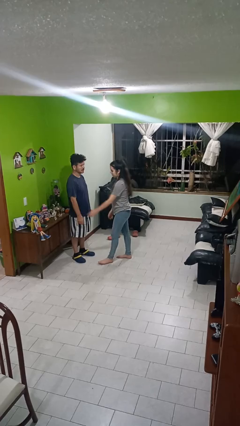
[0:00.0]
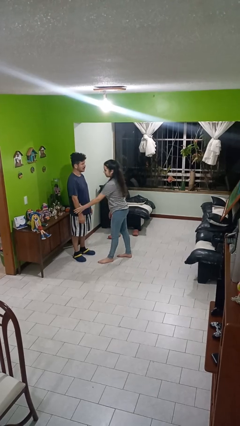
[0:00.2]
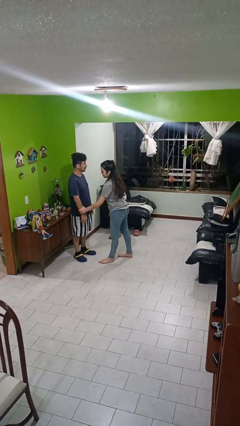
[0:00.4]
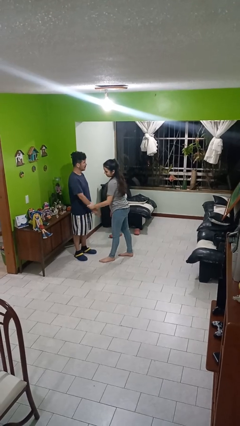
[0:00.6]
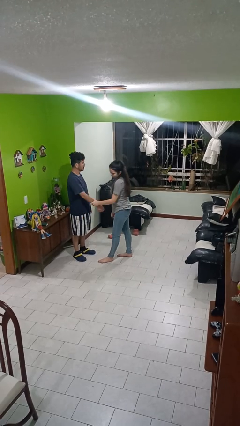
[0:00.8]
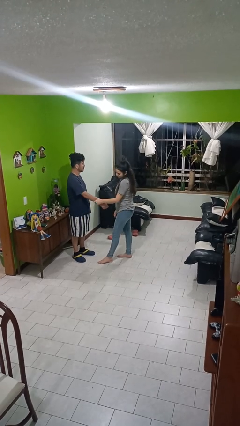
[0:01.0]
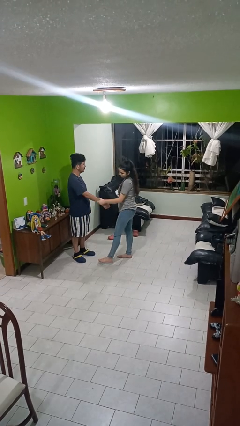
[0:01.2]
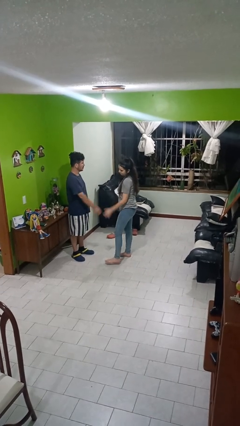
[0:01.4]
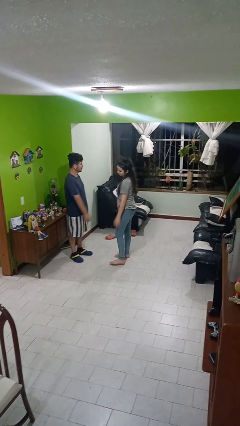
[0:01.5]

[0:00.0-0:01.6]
person grabs person by forearm

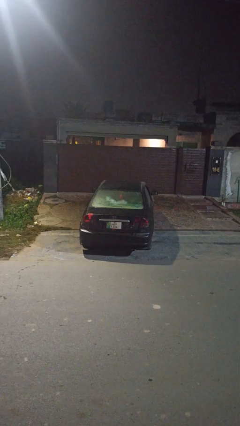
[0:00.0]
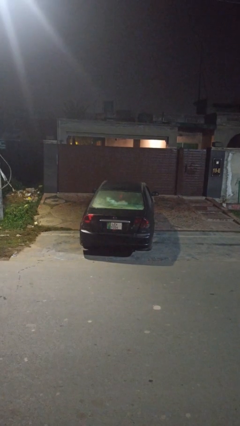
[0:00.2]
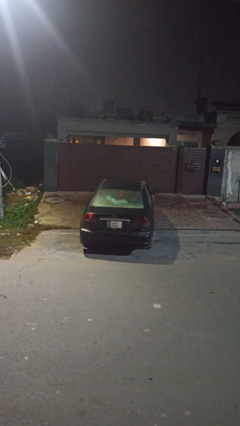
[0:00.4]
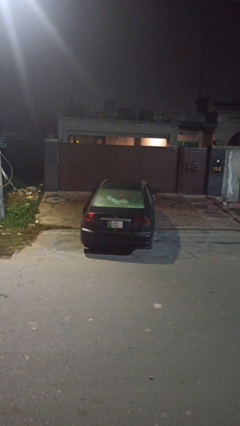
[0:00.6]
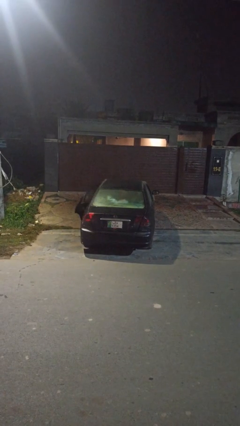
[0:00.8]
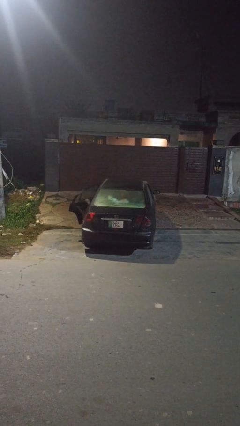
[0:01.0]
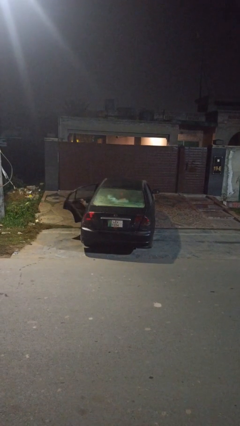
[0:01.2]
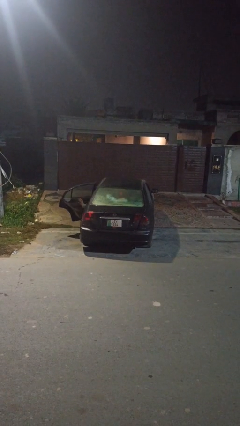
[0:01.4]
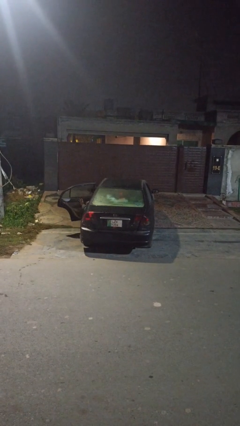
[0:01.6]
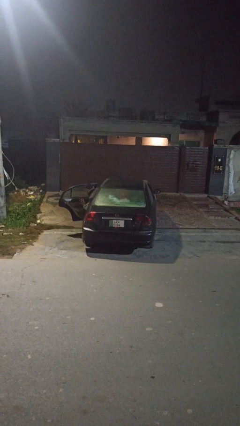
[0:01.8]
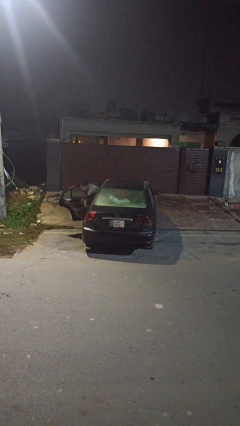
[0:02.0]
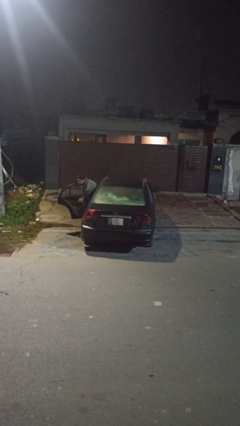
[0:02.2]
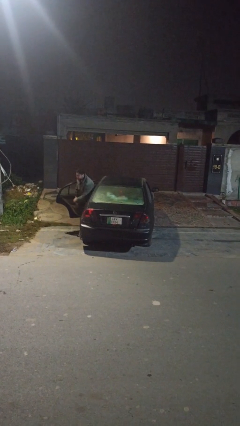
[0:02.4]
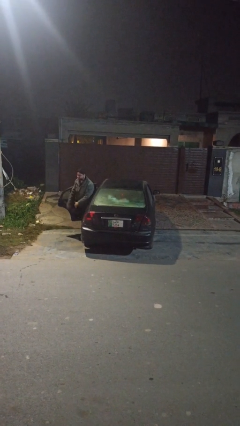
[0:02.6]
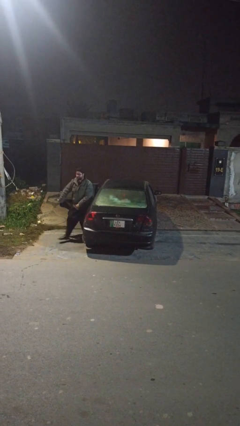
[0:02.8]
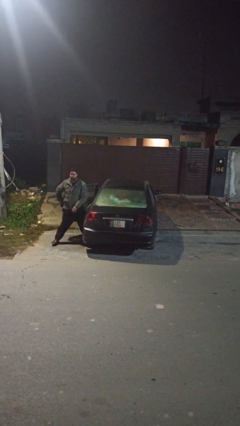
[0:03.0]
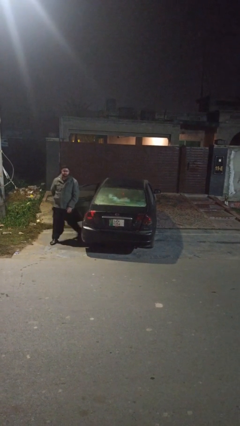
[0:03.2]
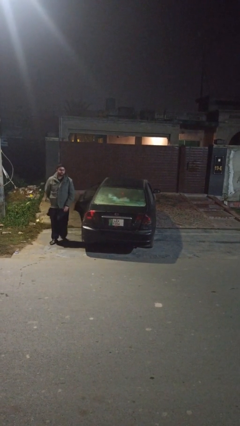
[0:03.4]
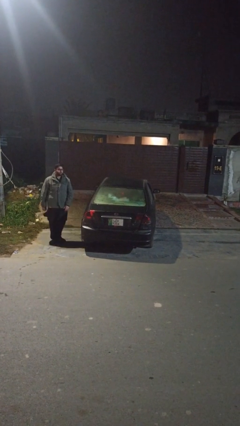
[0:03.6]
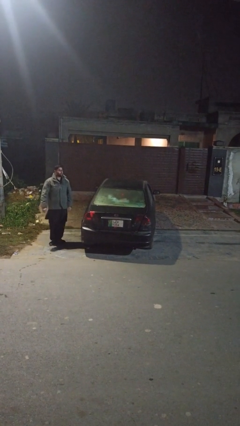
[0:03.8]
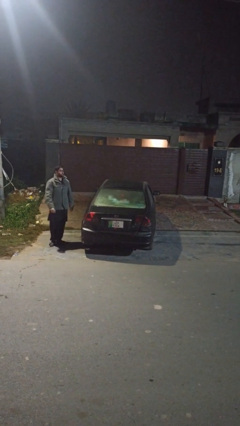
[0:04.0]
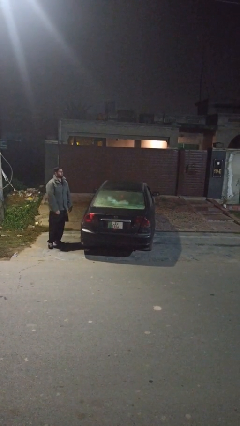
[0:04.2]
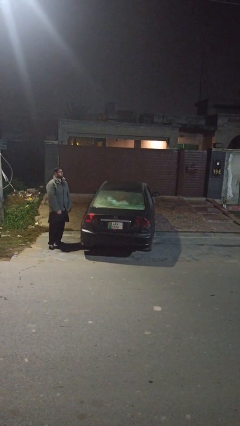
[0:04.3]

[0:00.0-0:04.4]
car drops off person

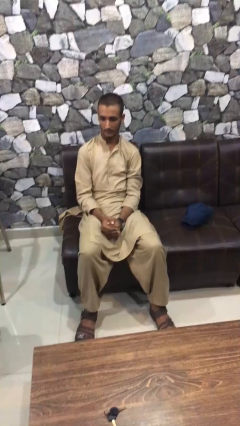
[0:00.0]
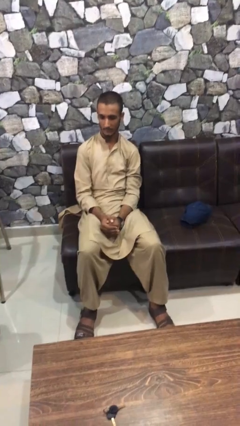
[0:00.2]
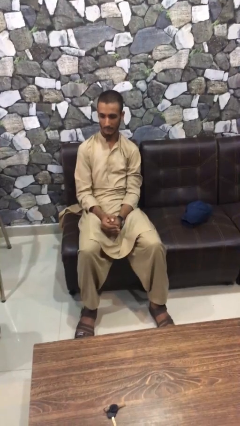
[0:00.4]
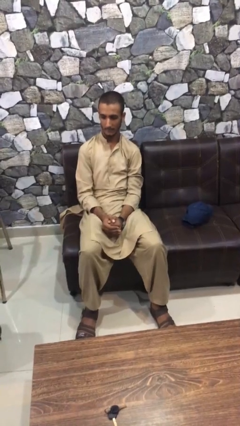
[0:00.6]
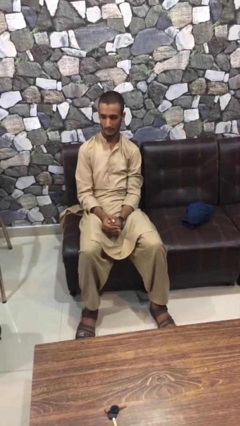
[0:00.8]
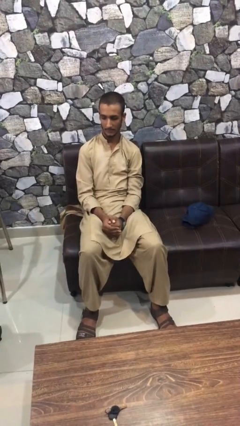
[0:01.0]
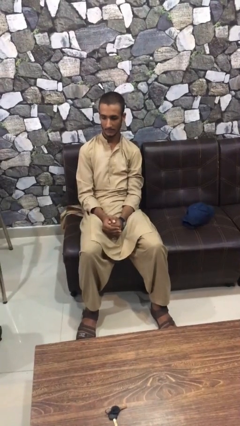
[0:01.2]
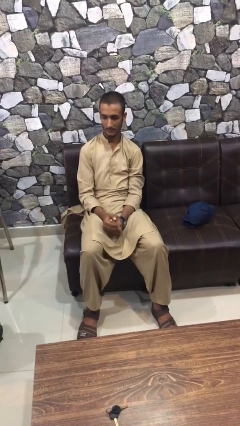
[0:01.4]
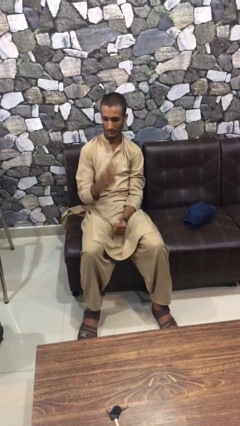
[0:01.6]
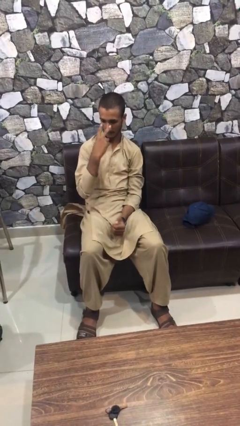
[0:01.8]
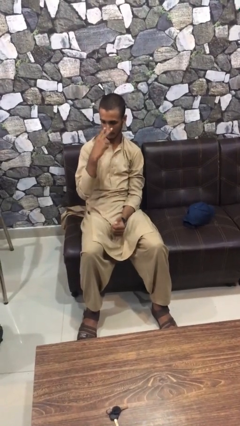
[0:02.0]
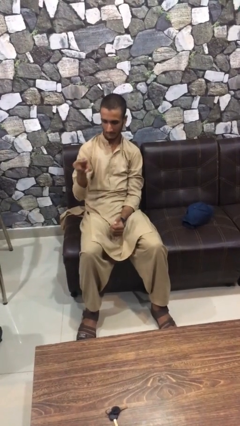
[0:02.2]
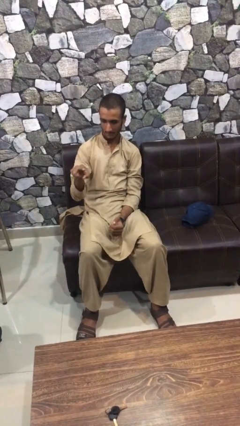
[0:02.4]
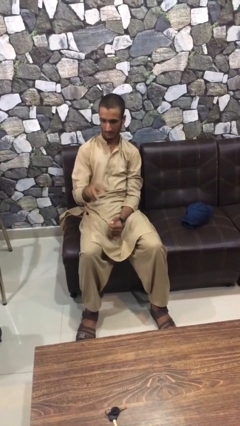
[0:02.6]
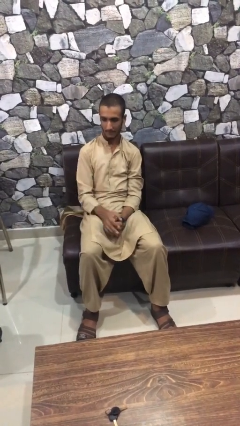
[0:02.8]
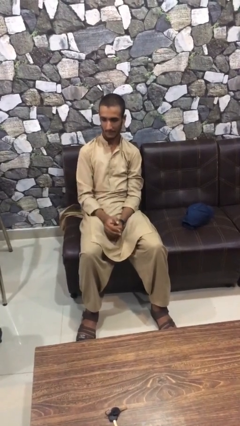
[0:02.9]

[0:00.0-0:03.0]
person gestures watch closely

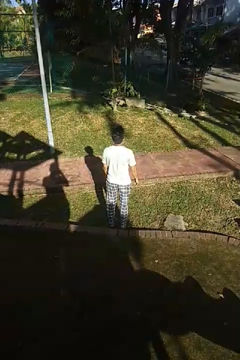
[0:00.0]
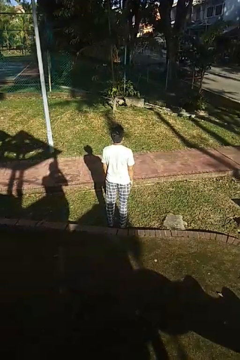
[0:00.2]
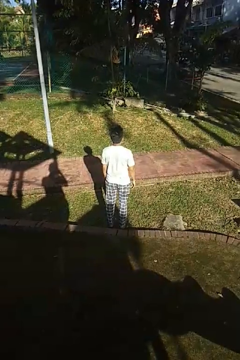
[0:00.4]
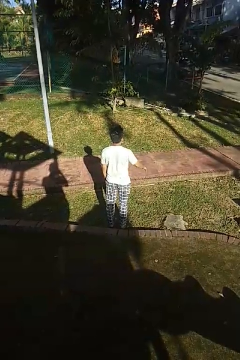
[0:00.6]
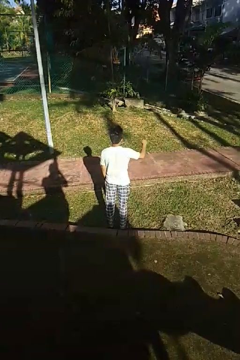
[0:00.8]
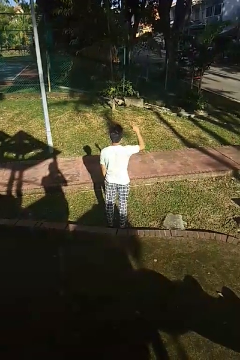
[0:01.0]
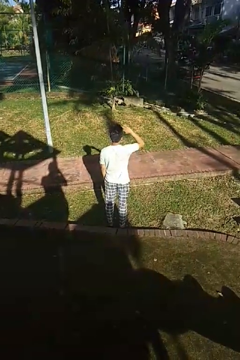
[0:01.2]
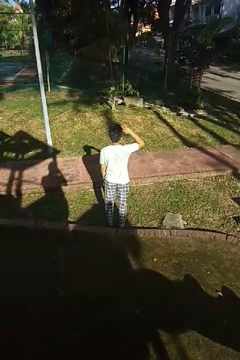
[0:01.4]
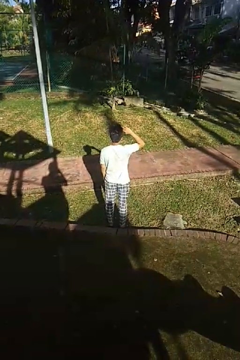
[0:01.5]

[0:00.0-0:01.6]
person salutes

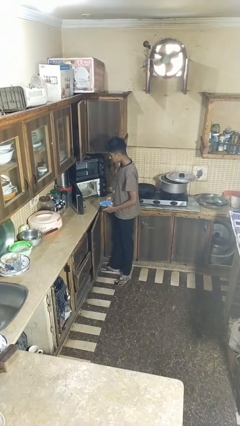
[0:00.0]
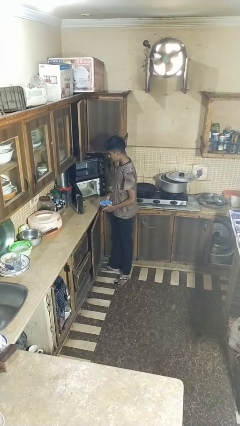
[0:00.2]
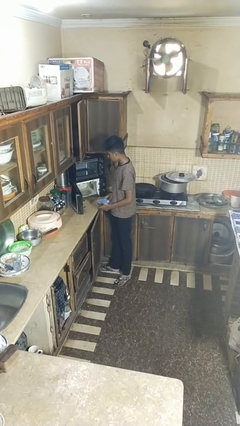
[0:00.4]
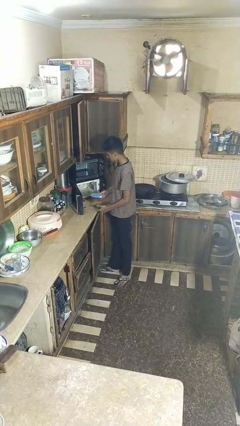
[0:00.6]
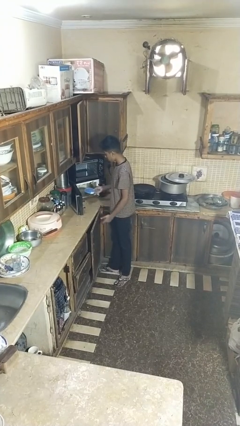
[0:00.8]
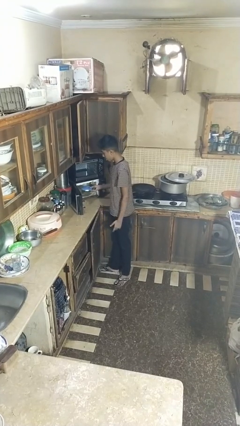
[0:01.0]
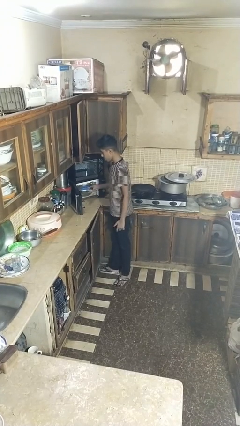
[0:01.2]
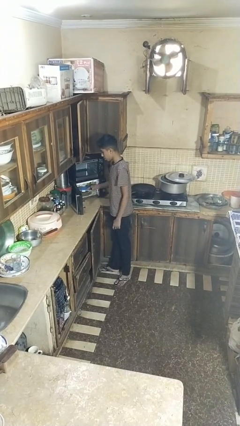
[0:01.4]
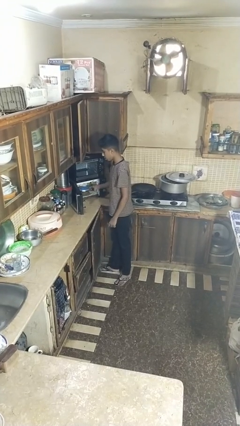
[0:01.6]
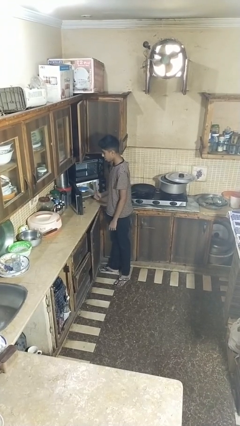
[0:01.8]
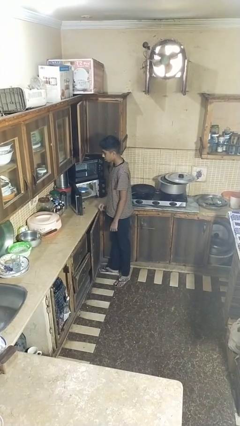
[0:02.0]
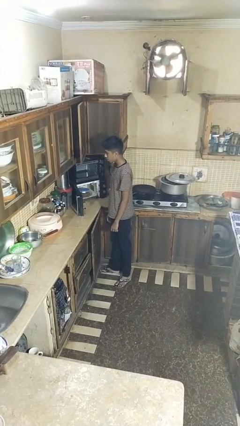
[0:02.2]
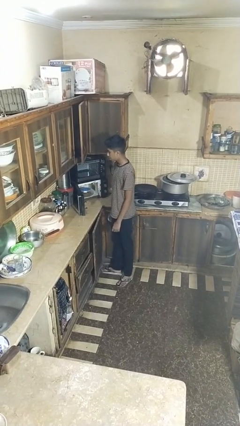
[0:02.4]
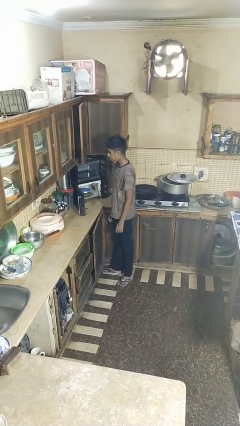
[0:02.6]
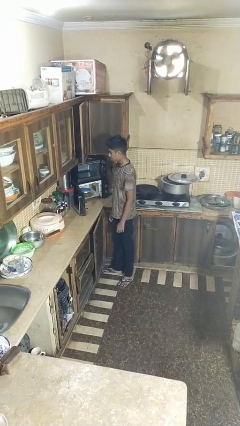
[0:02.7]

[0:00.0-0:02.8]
person puts object into microwave

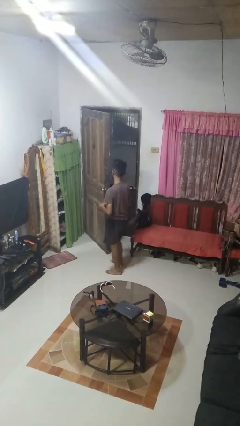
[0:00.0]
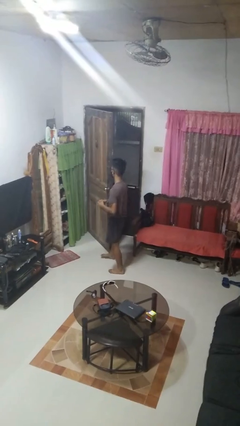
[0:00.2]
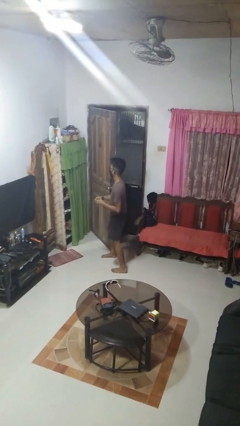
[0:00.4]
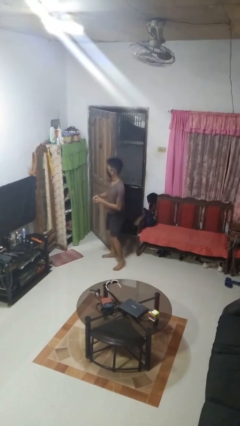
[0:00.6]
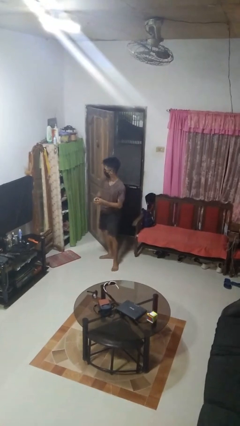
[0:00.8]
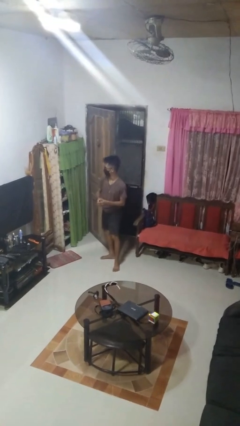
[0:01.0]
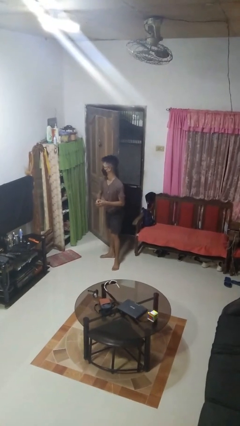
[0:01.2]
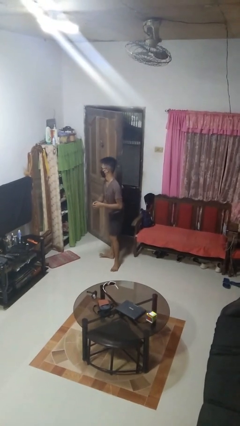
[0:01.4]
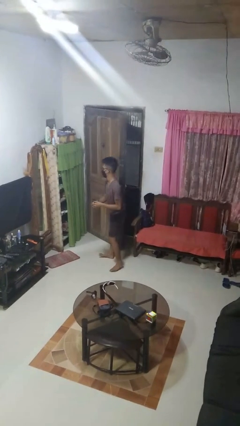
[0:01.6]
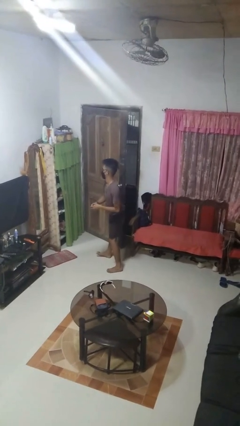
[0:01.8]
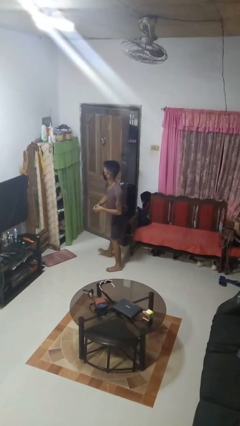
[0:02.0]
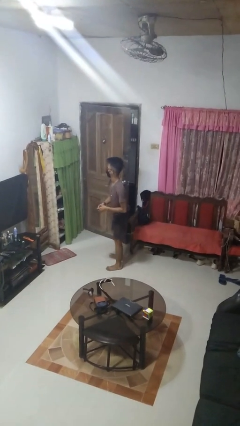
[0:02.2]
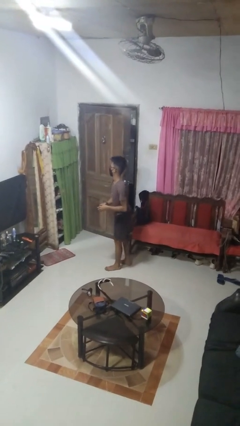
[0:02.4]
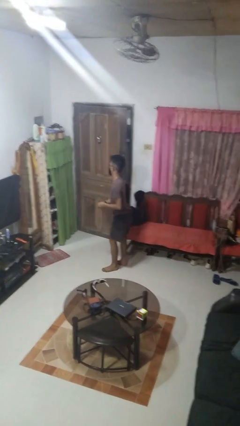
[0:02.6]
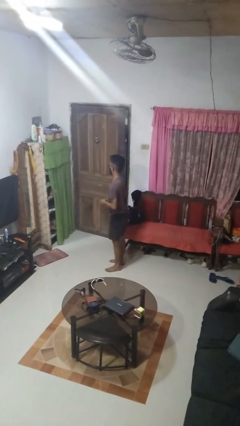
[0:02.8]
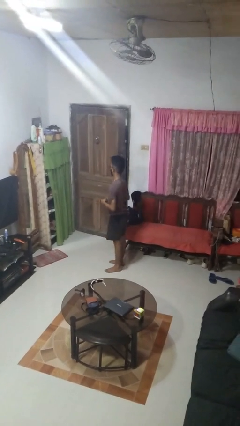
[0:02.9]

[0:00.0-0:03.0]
person closes door with hip

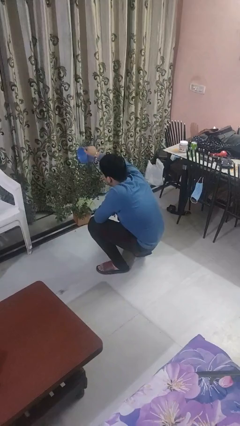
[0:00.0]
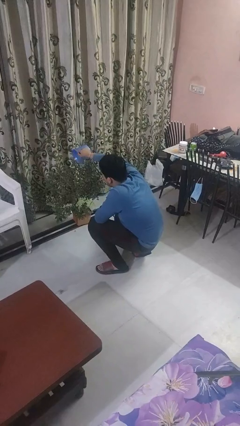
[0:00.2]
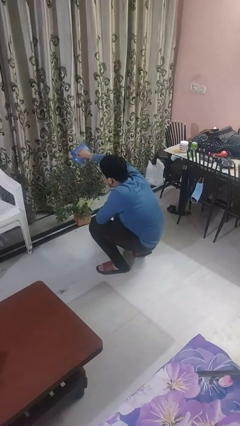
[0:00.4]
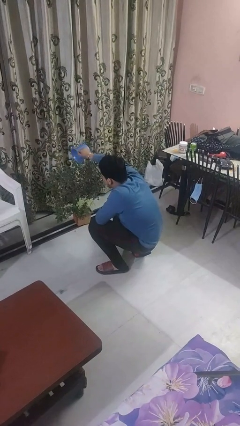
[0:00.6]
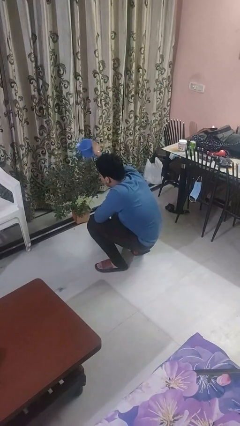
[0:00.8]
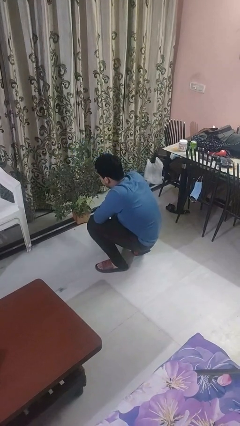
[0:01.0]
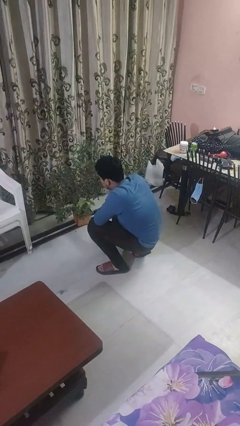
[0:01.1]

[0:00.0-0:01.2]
person waters houseplant
